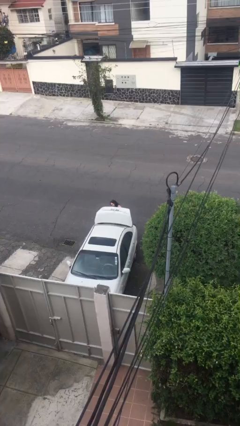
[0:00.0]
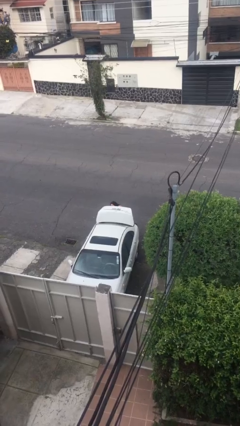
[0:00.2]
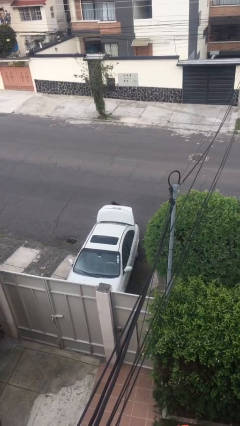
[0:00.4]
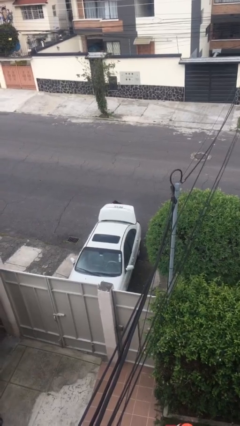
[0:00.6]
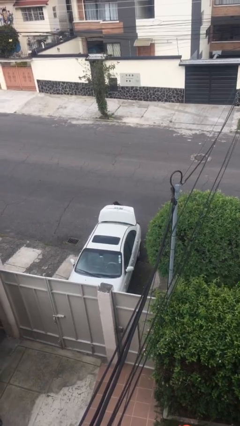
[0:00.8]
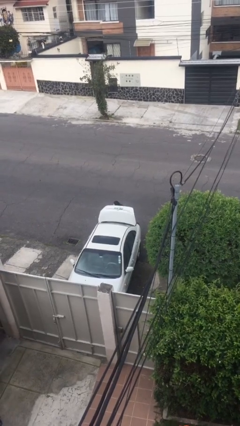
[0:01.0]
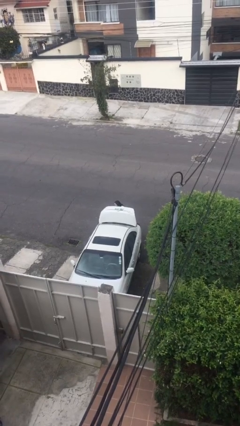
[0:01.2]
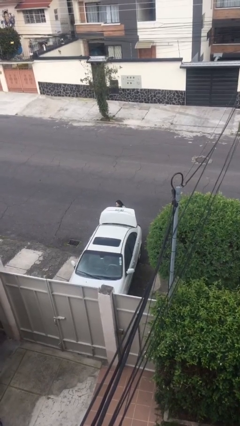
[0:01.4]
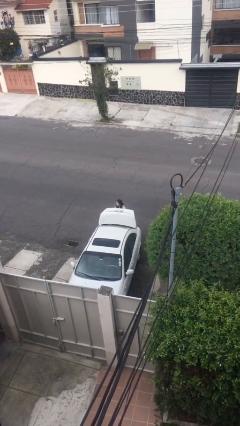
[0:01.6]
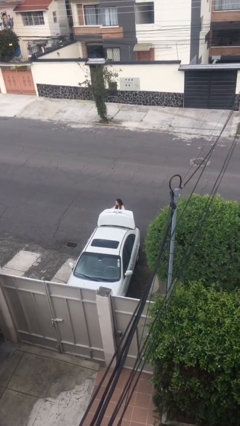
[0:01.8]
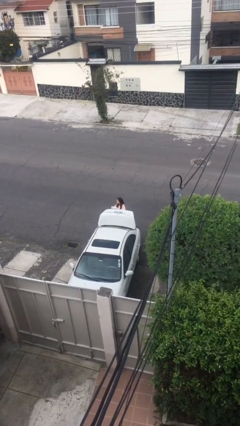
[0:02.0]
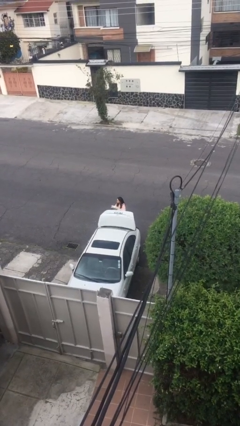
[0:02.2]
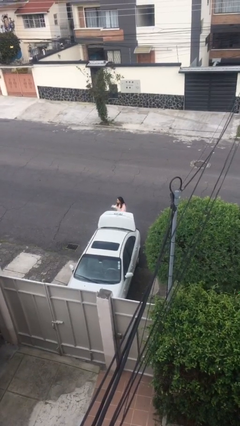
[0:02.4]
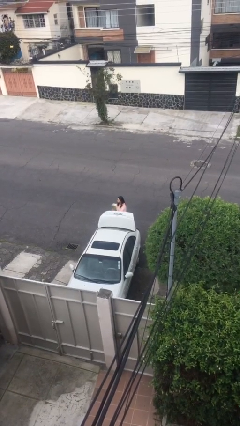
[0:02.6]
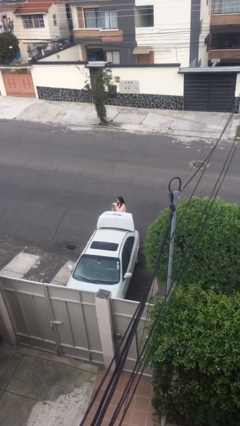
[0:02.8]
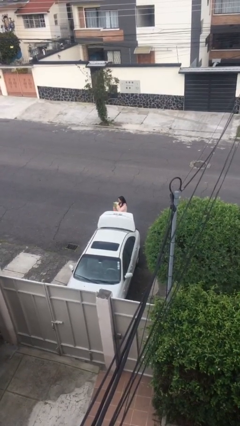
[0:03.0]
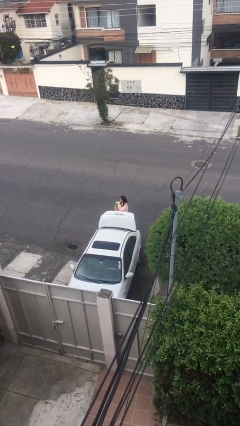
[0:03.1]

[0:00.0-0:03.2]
person unloads car

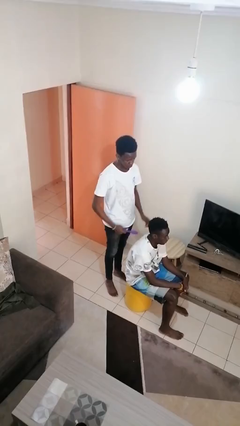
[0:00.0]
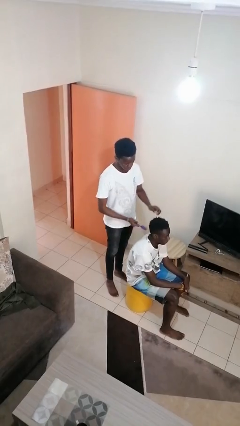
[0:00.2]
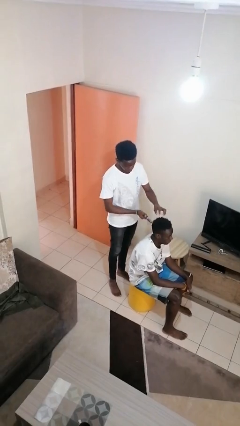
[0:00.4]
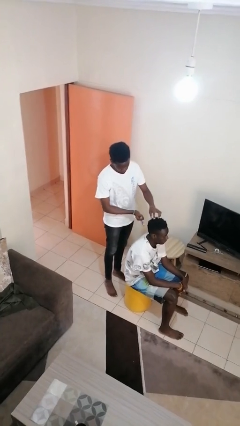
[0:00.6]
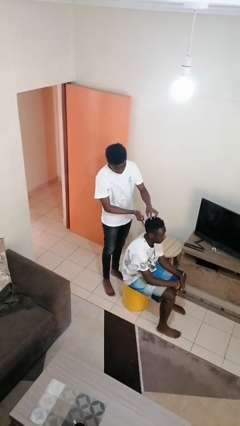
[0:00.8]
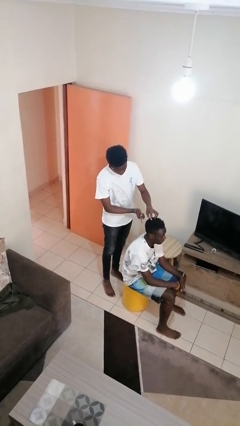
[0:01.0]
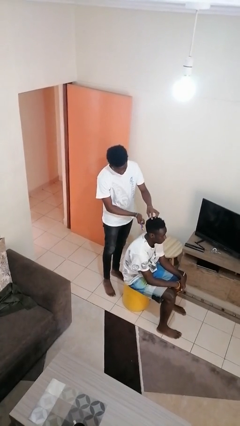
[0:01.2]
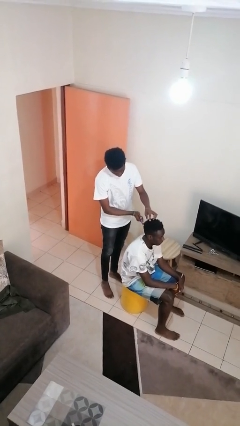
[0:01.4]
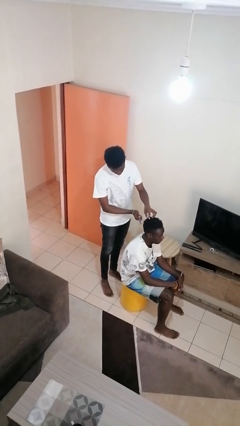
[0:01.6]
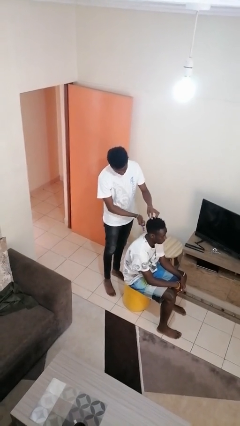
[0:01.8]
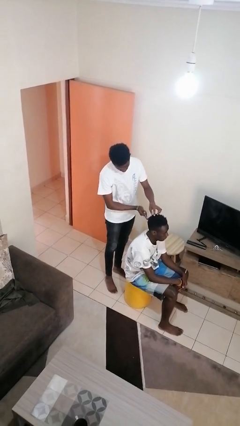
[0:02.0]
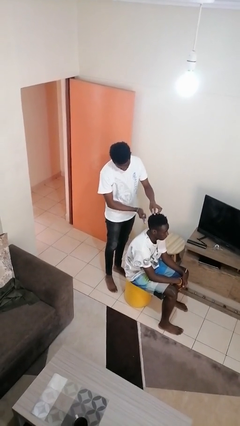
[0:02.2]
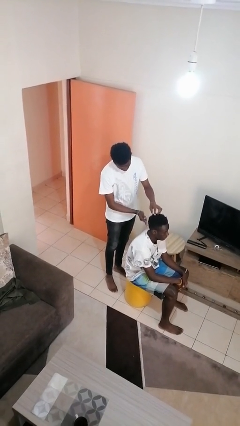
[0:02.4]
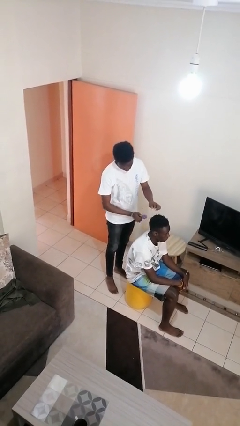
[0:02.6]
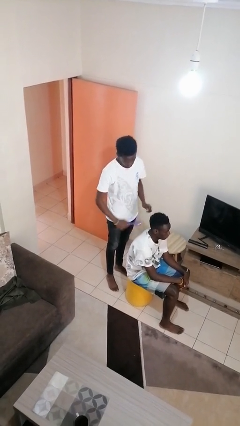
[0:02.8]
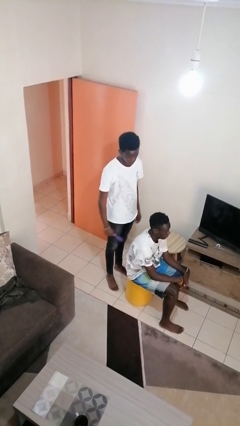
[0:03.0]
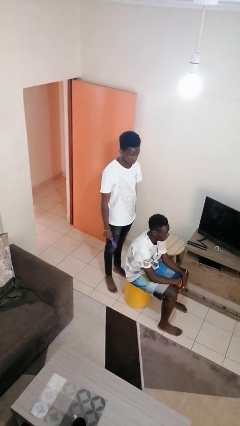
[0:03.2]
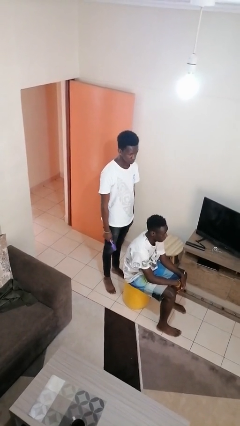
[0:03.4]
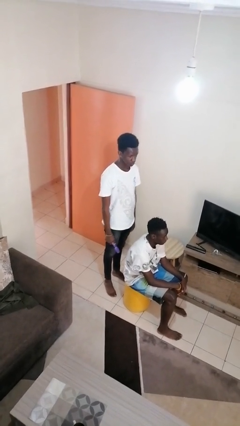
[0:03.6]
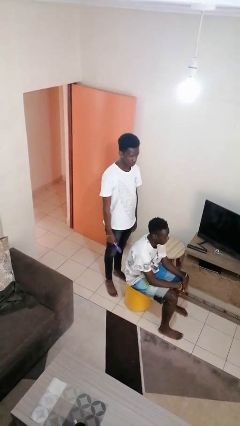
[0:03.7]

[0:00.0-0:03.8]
person brushes hair of person

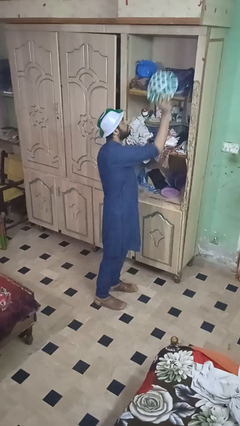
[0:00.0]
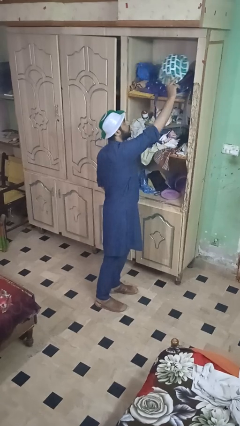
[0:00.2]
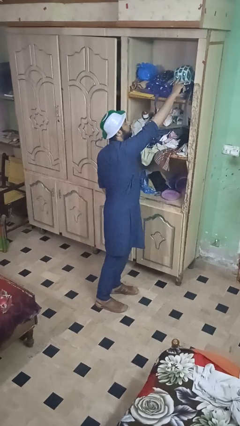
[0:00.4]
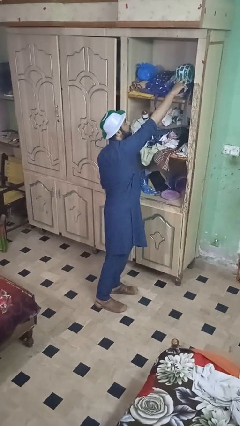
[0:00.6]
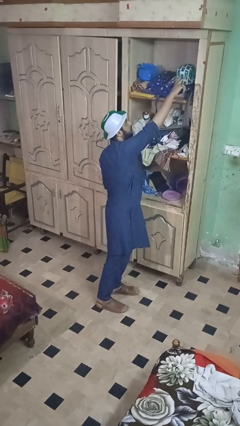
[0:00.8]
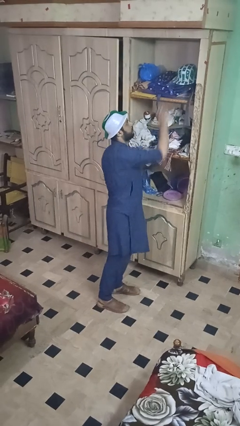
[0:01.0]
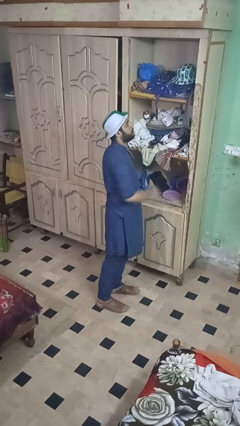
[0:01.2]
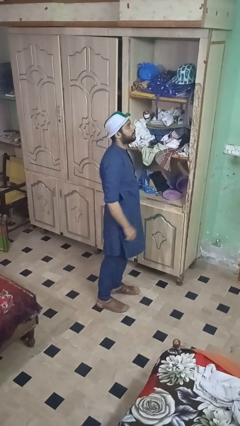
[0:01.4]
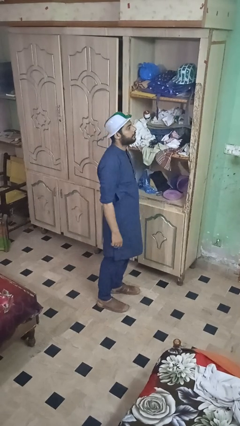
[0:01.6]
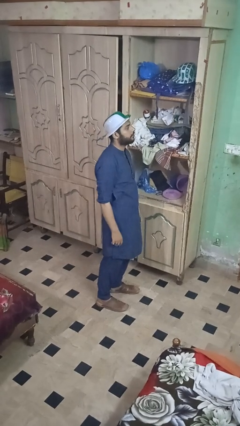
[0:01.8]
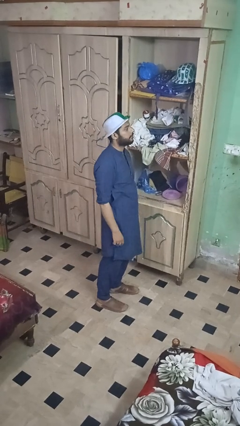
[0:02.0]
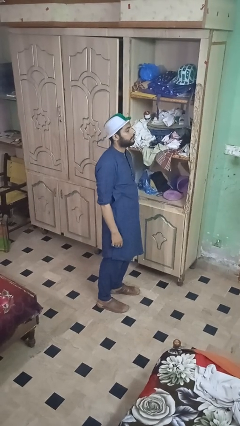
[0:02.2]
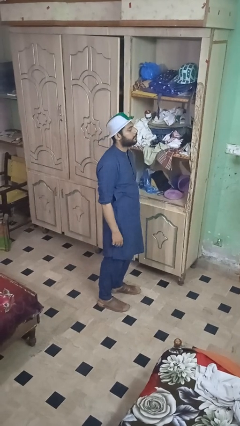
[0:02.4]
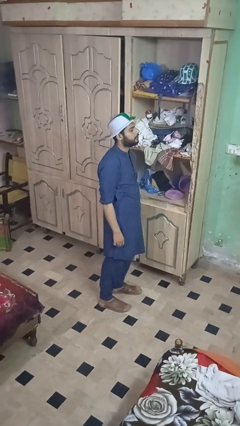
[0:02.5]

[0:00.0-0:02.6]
person puts down object on shelf

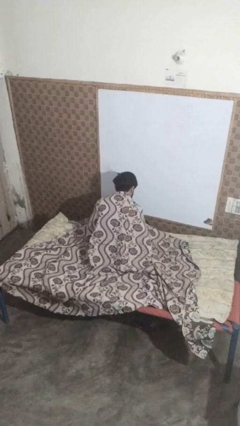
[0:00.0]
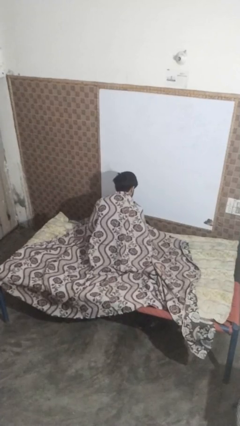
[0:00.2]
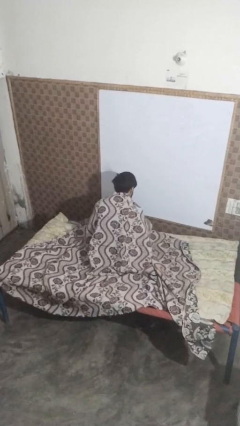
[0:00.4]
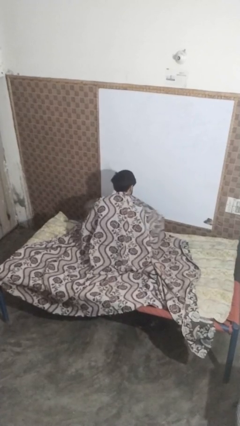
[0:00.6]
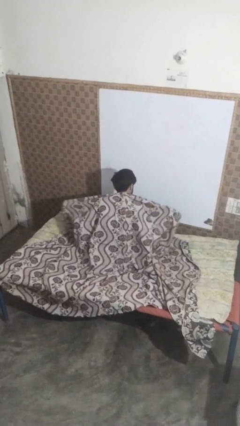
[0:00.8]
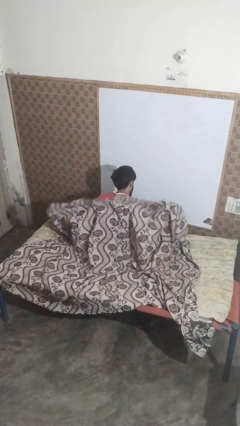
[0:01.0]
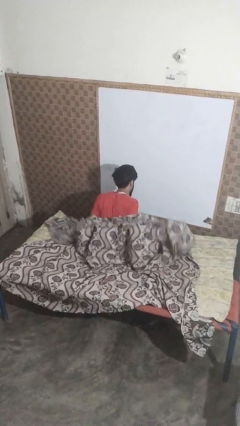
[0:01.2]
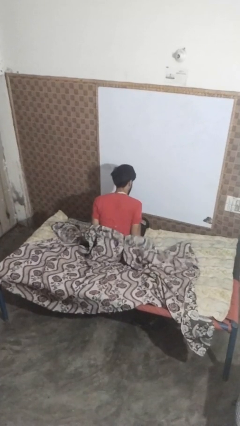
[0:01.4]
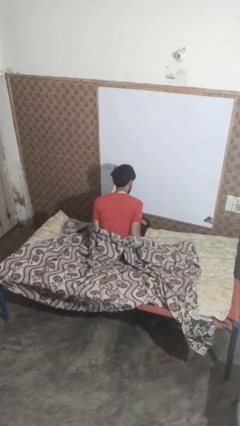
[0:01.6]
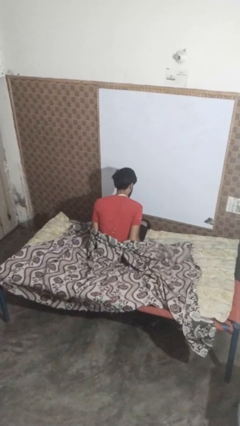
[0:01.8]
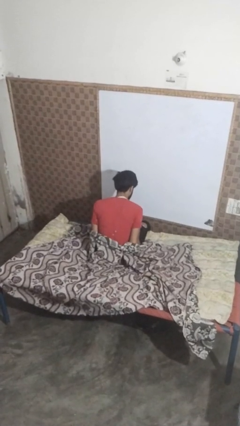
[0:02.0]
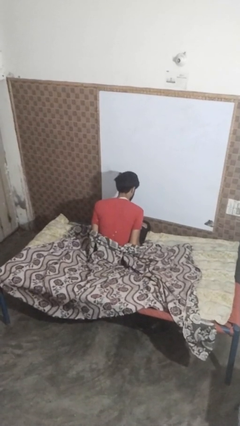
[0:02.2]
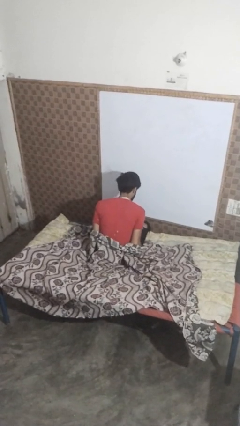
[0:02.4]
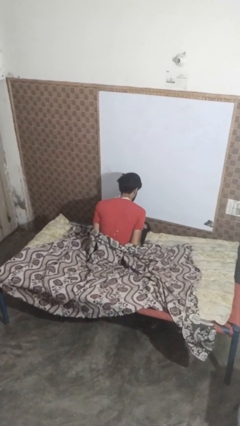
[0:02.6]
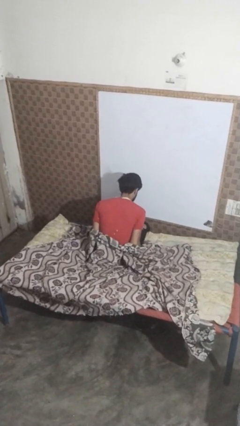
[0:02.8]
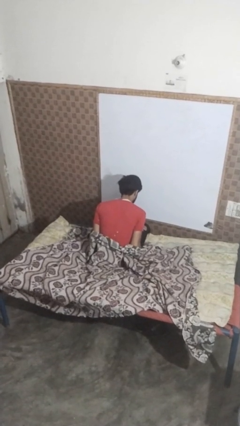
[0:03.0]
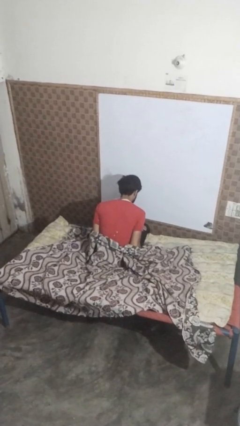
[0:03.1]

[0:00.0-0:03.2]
person uncovers with blanket

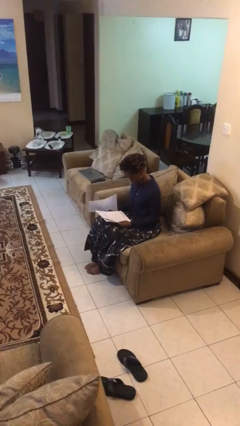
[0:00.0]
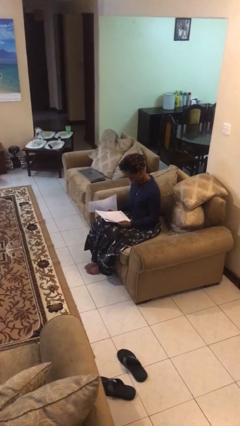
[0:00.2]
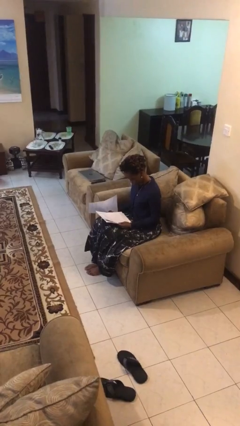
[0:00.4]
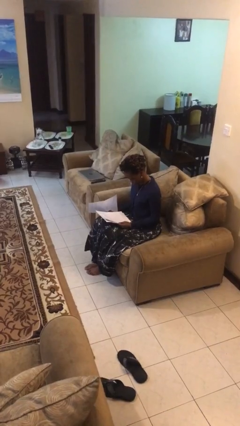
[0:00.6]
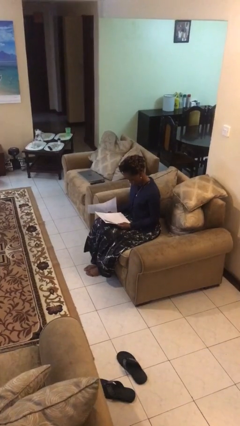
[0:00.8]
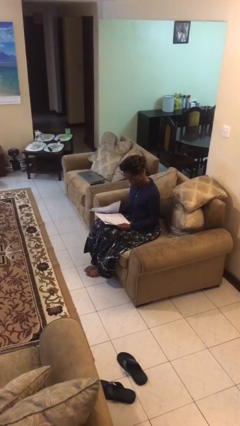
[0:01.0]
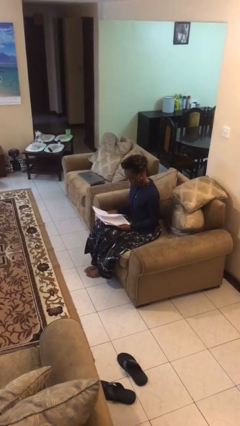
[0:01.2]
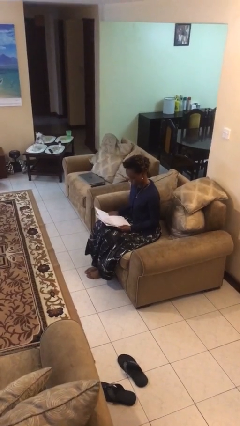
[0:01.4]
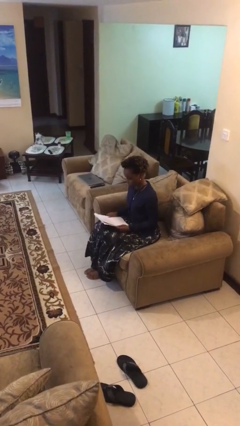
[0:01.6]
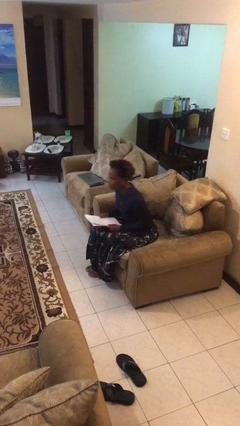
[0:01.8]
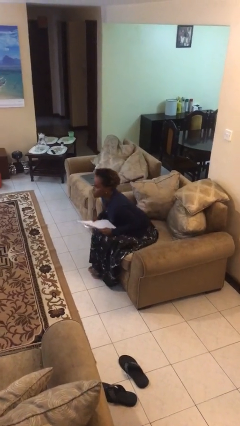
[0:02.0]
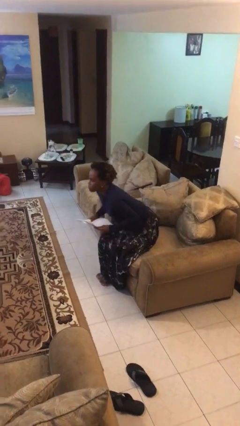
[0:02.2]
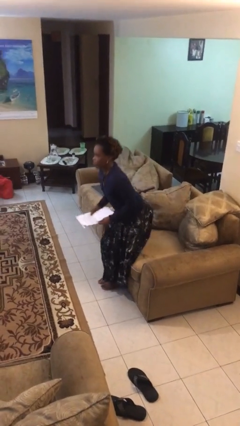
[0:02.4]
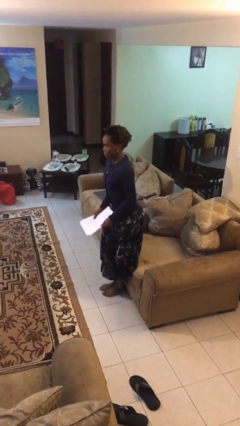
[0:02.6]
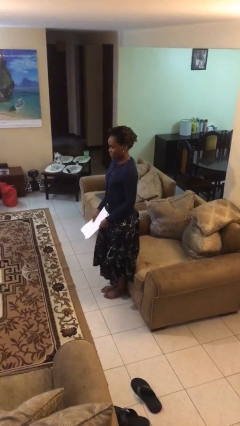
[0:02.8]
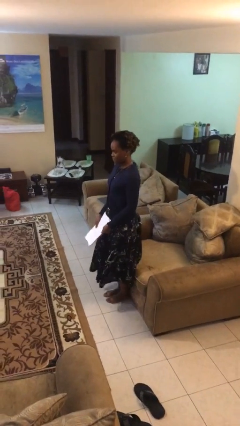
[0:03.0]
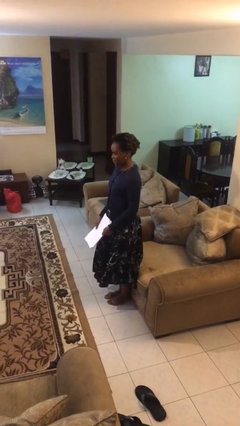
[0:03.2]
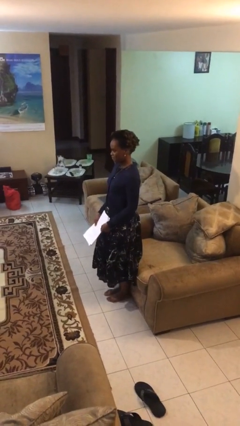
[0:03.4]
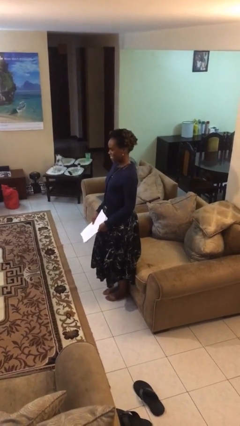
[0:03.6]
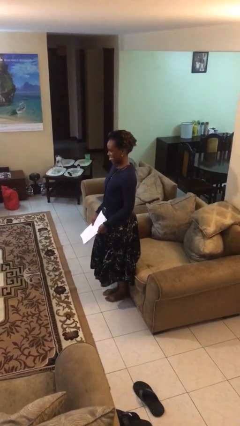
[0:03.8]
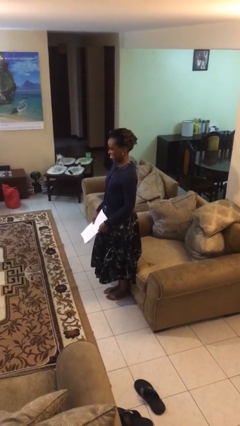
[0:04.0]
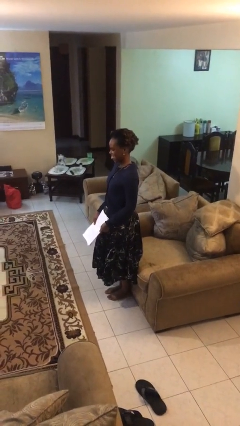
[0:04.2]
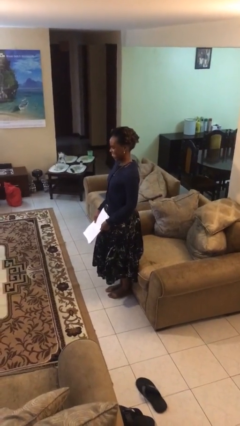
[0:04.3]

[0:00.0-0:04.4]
person stands up

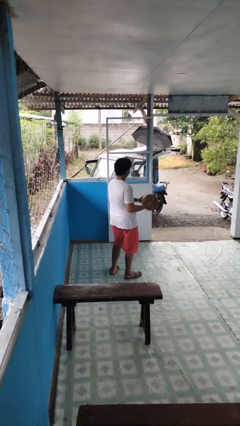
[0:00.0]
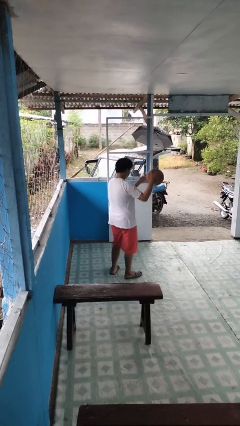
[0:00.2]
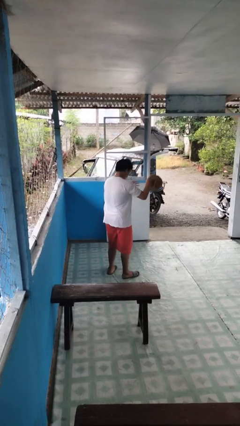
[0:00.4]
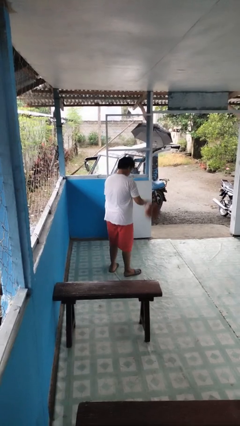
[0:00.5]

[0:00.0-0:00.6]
person bounces ball on floor
